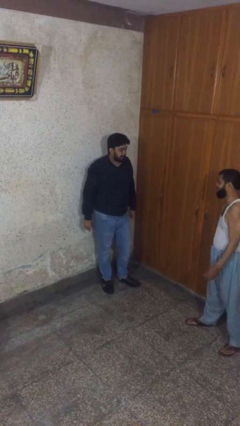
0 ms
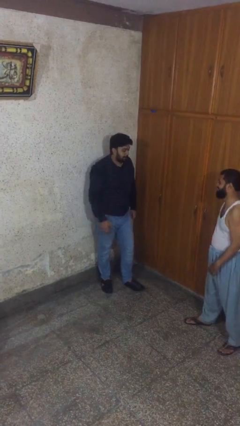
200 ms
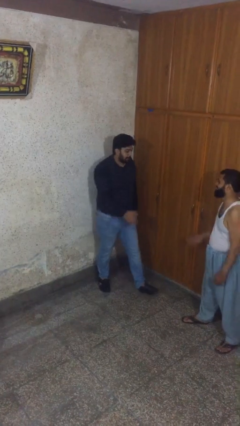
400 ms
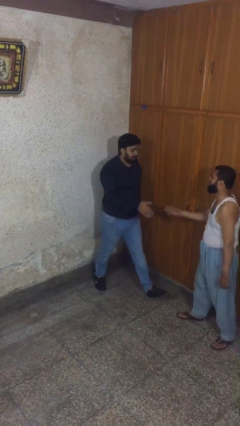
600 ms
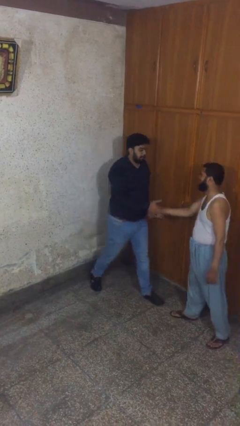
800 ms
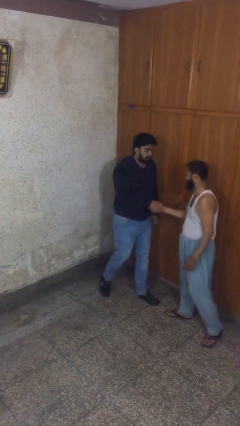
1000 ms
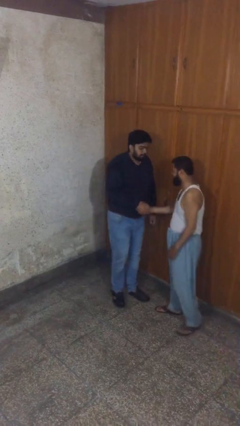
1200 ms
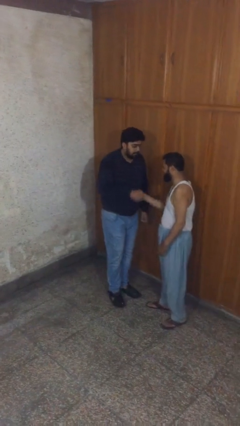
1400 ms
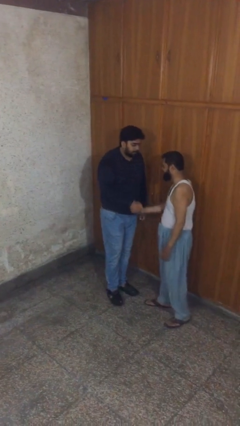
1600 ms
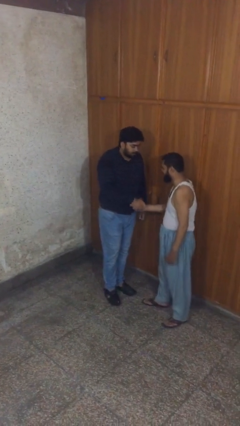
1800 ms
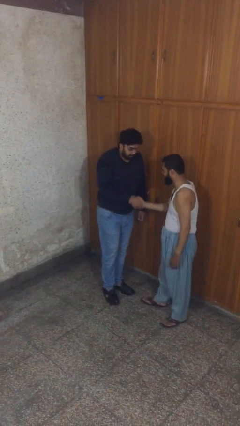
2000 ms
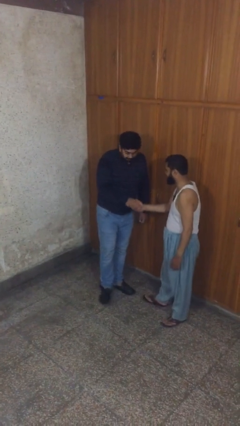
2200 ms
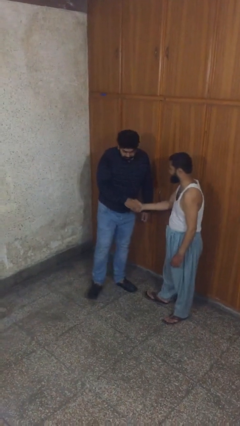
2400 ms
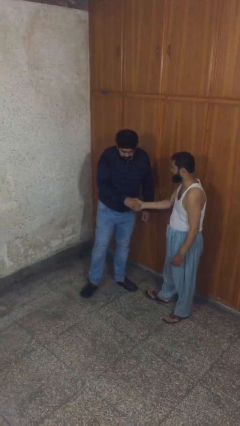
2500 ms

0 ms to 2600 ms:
person shakes hand

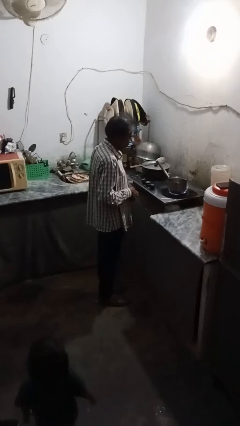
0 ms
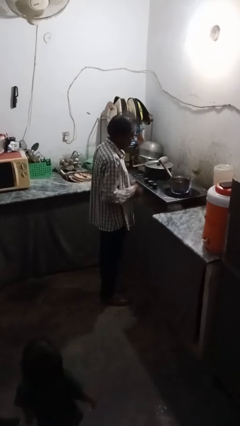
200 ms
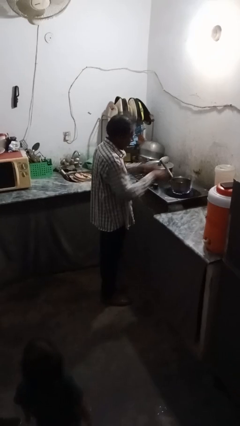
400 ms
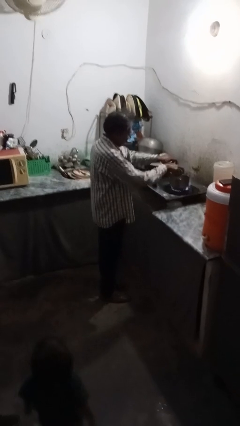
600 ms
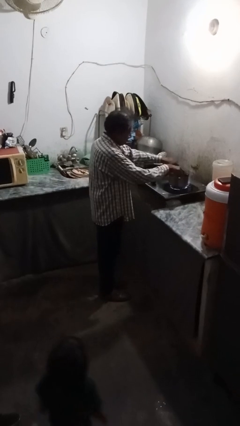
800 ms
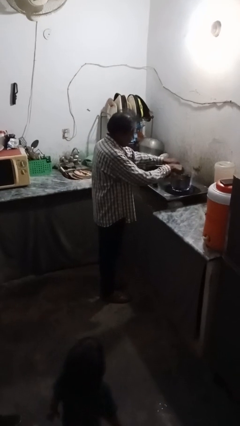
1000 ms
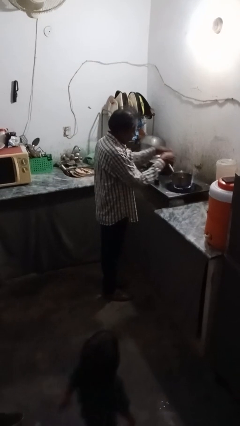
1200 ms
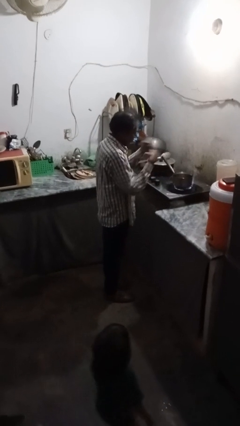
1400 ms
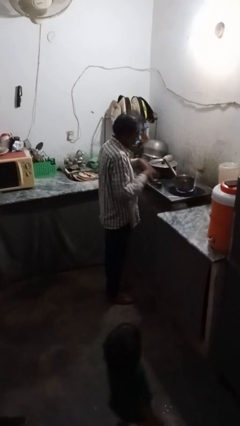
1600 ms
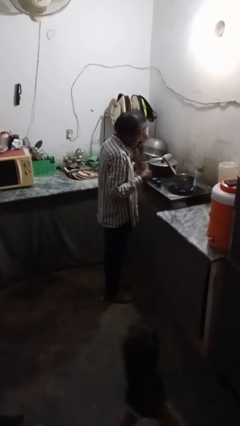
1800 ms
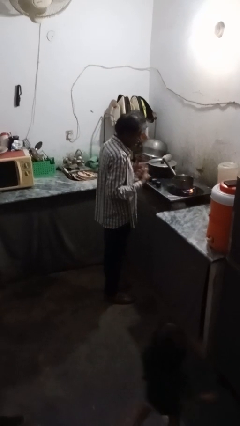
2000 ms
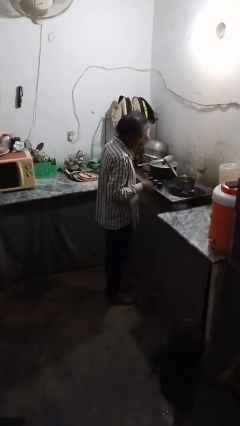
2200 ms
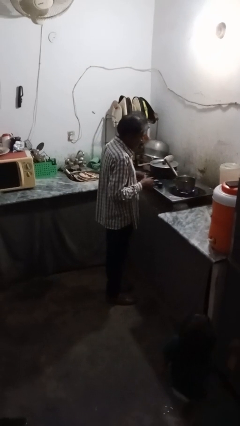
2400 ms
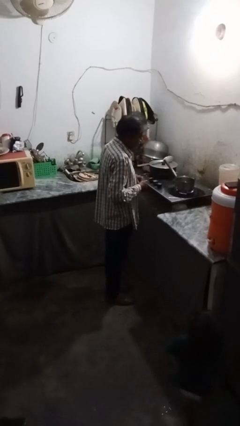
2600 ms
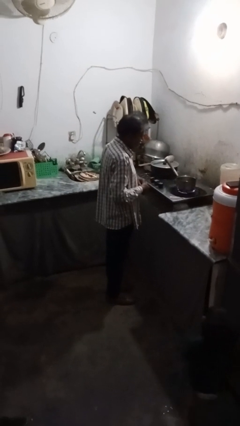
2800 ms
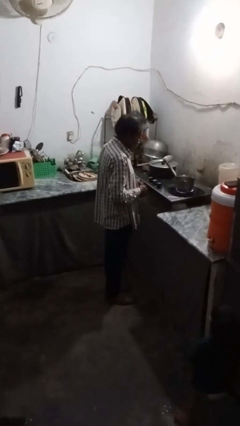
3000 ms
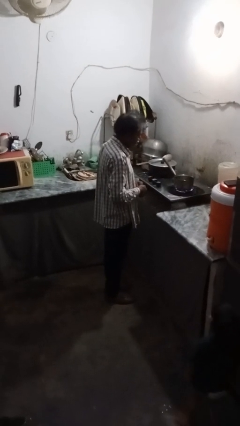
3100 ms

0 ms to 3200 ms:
person burns hand

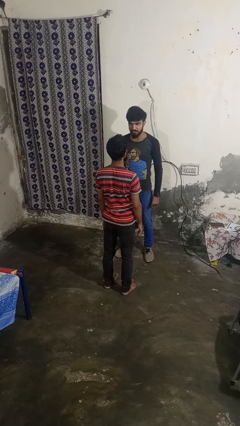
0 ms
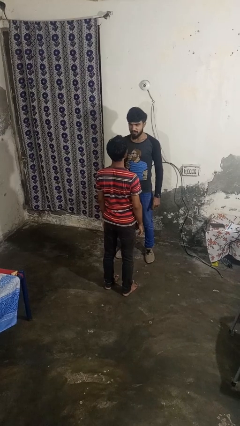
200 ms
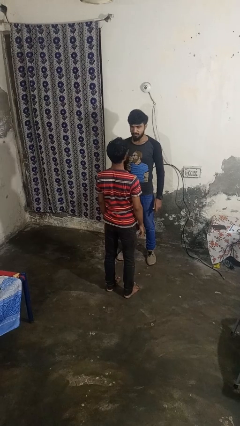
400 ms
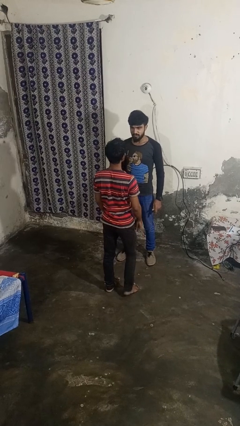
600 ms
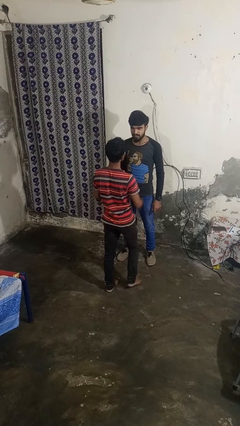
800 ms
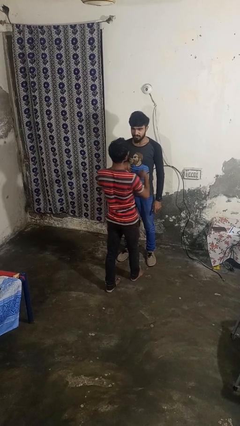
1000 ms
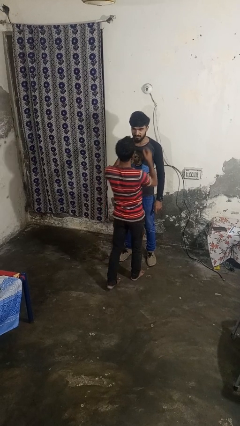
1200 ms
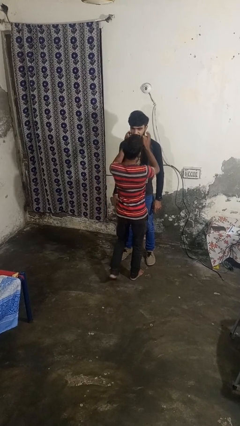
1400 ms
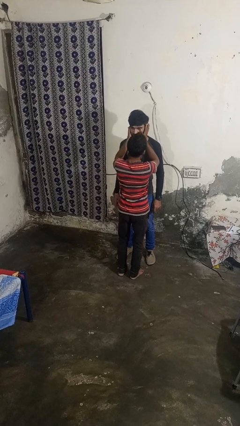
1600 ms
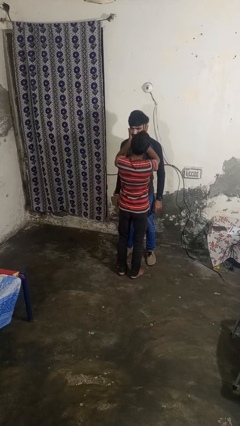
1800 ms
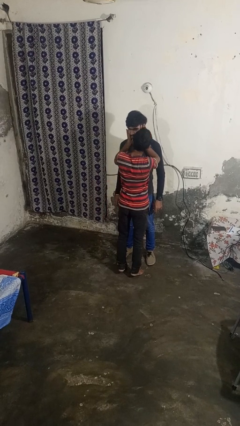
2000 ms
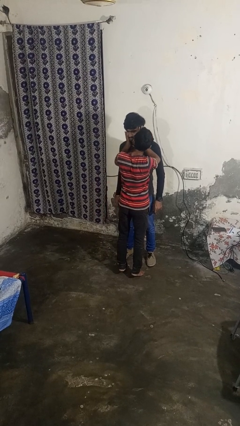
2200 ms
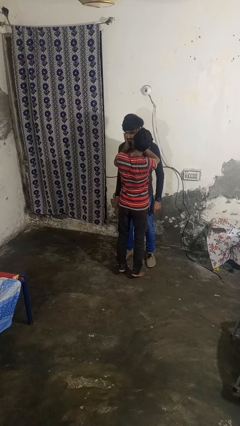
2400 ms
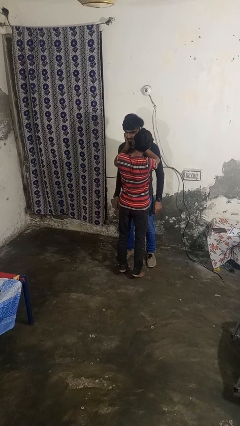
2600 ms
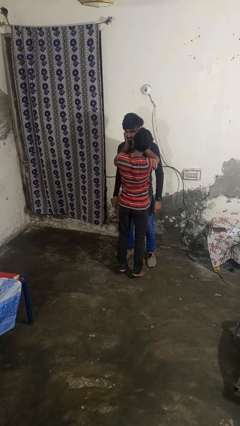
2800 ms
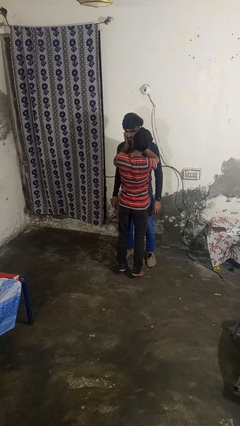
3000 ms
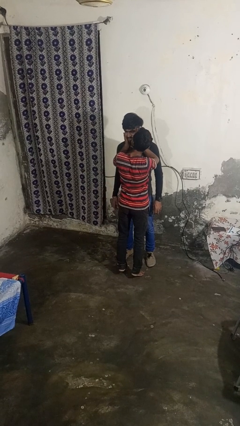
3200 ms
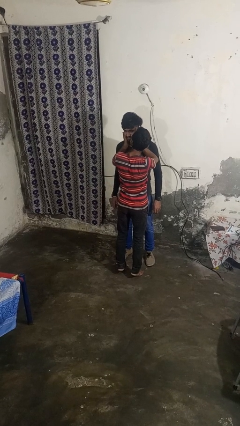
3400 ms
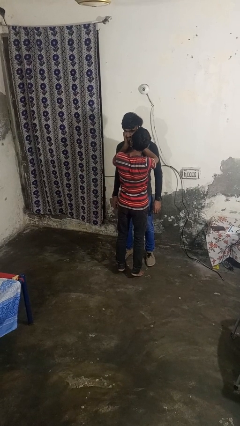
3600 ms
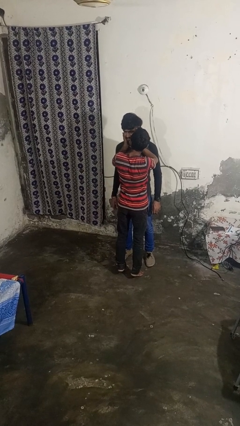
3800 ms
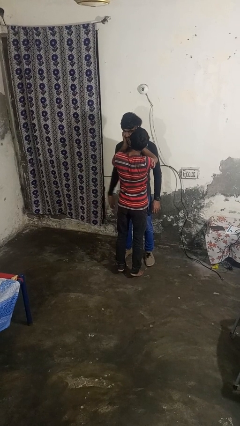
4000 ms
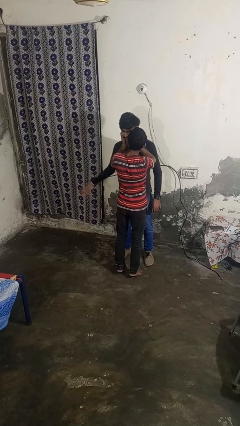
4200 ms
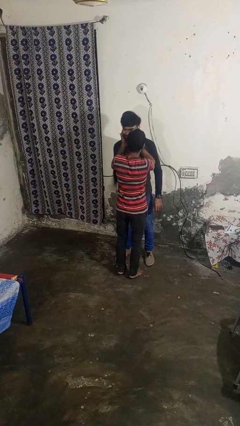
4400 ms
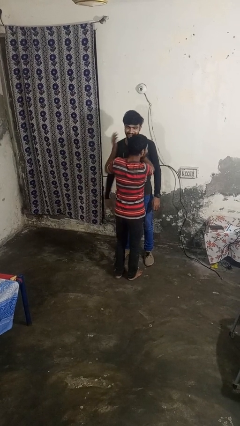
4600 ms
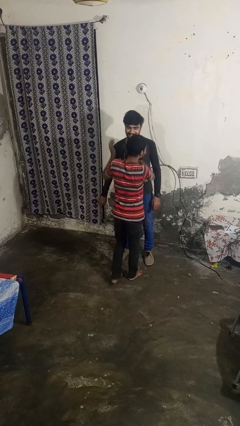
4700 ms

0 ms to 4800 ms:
person kisses cheek of person

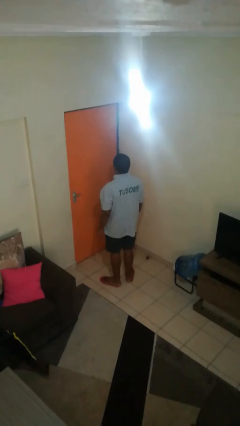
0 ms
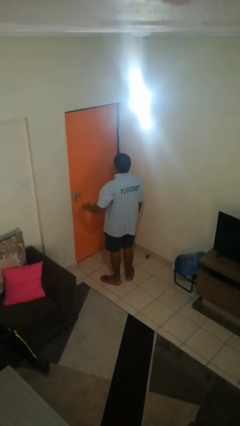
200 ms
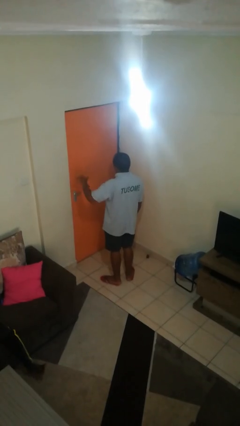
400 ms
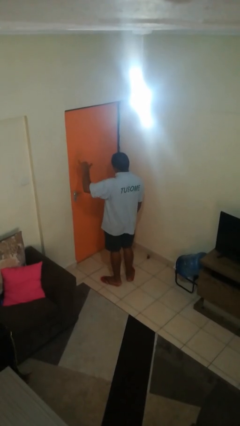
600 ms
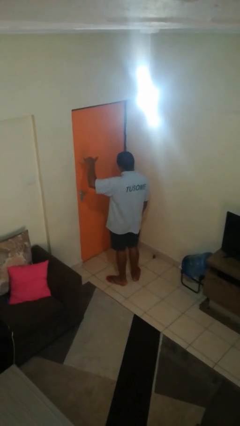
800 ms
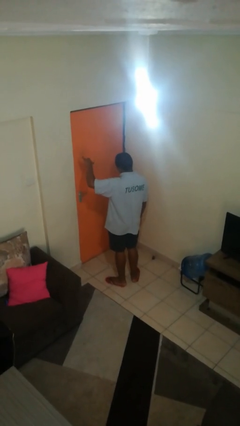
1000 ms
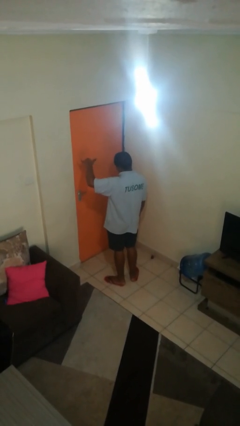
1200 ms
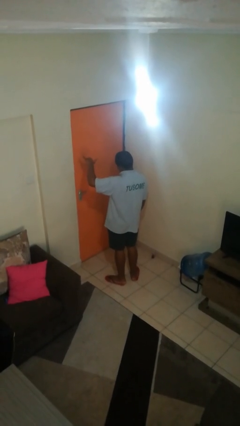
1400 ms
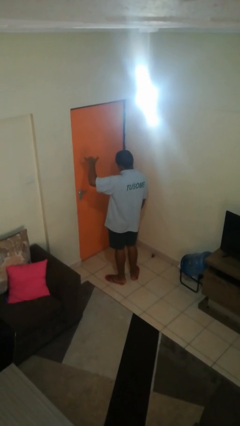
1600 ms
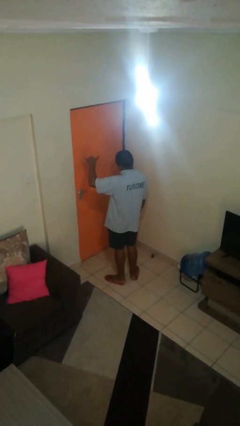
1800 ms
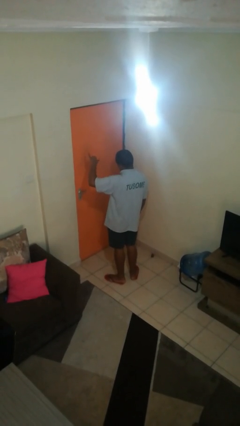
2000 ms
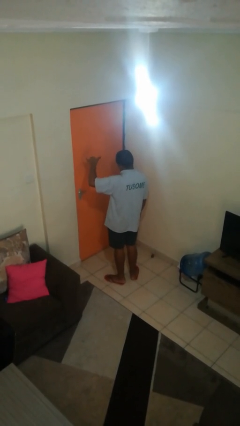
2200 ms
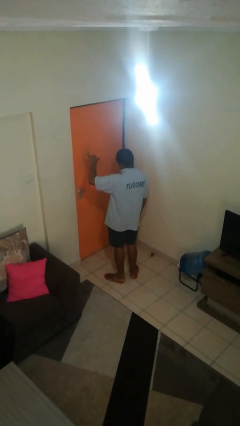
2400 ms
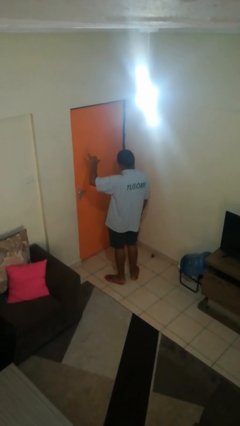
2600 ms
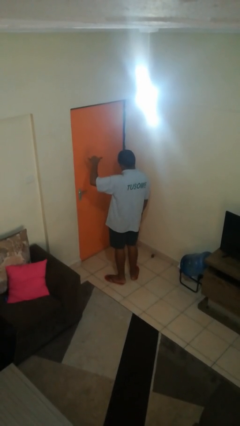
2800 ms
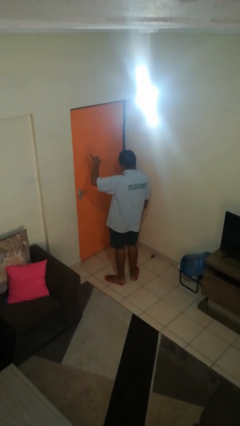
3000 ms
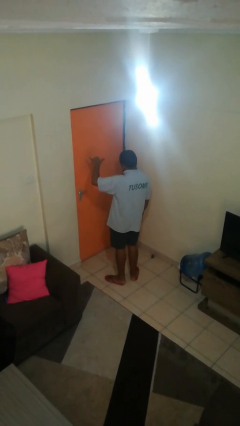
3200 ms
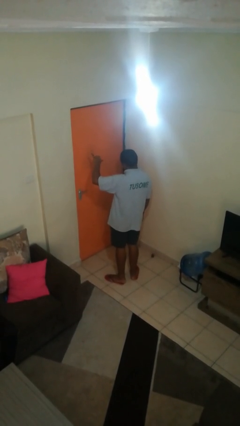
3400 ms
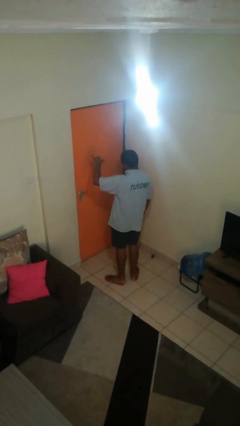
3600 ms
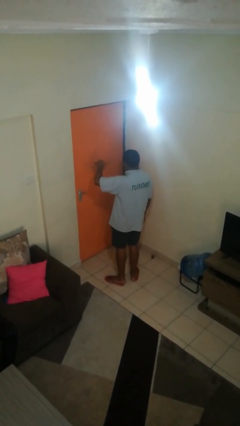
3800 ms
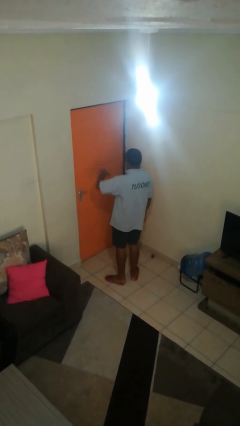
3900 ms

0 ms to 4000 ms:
person gestures hang loose

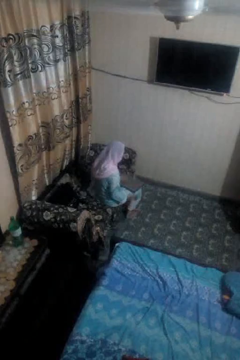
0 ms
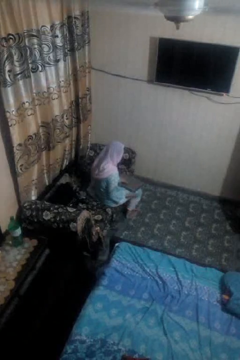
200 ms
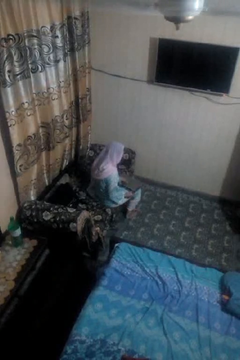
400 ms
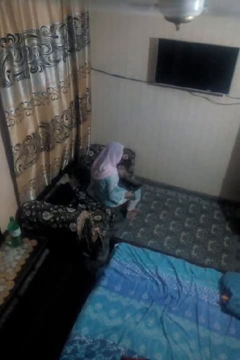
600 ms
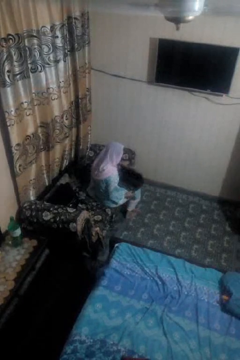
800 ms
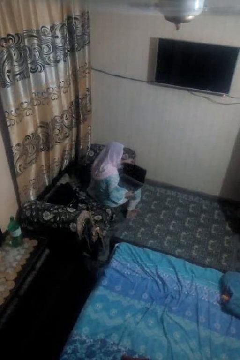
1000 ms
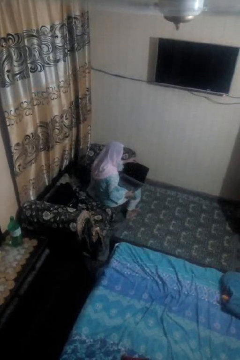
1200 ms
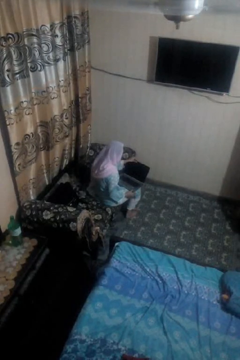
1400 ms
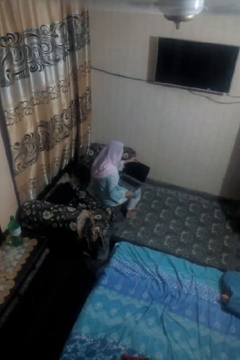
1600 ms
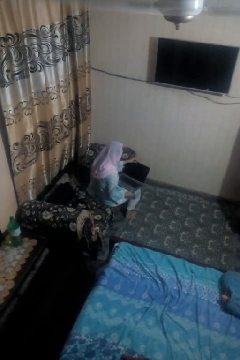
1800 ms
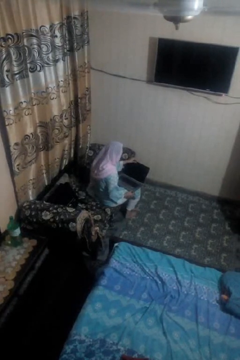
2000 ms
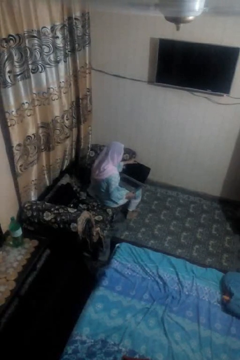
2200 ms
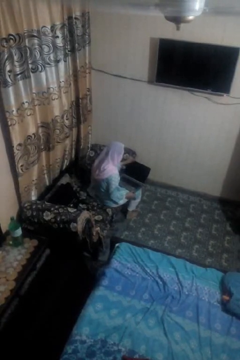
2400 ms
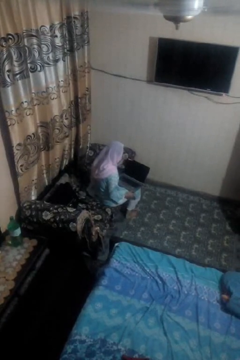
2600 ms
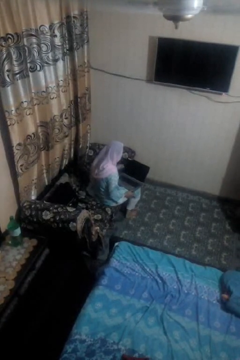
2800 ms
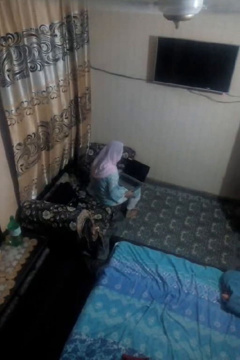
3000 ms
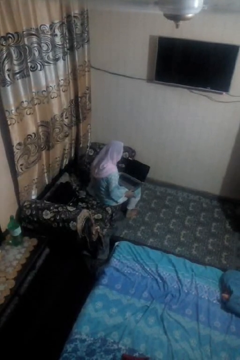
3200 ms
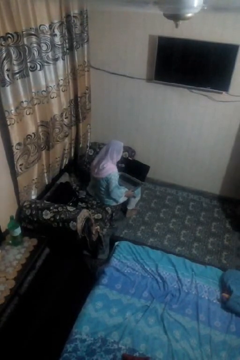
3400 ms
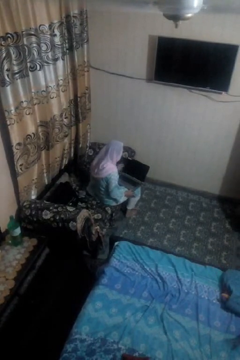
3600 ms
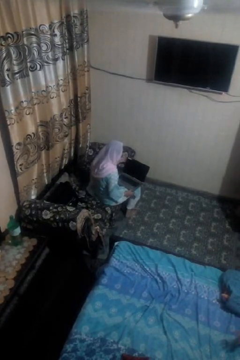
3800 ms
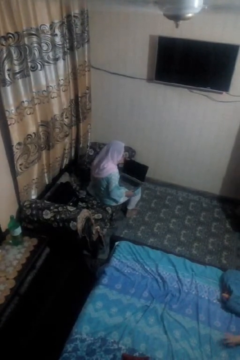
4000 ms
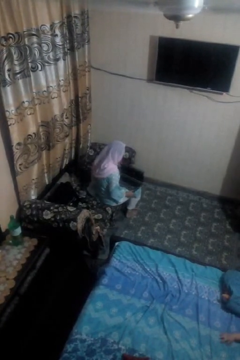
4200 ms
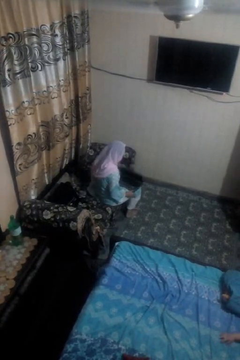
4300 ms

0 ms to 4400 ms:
person opens laptop
